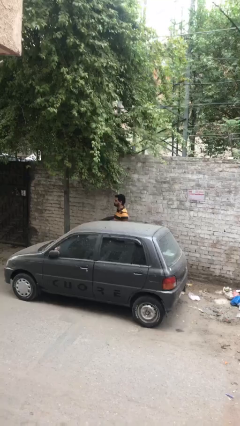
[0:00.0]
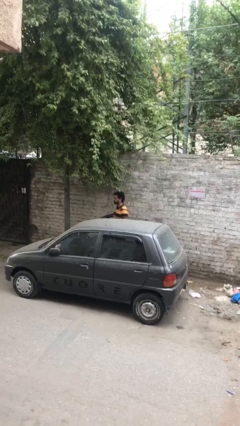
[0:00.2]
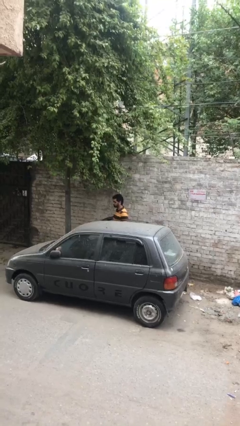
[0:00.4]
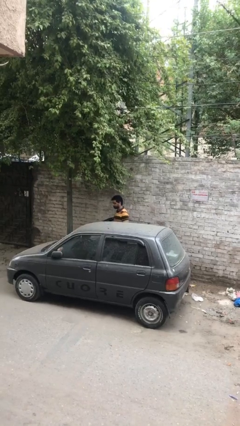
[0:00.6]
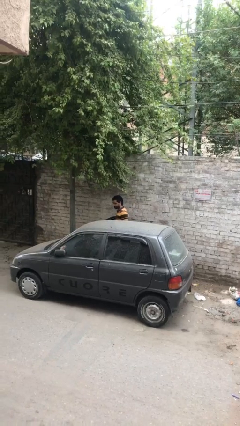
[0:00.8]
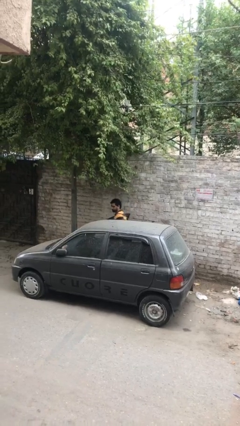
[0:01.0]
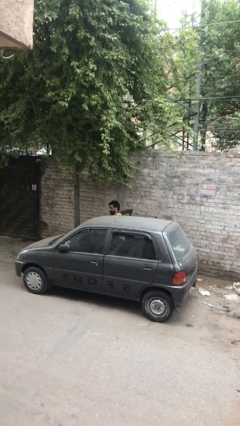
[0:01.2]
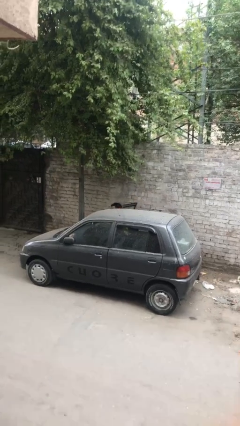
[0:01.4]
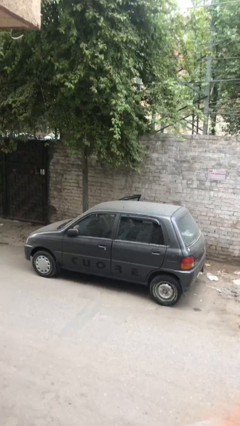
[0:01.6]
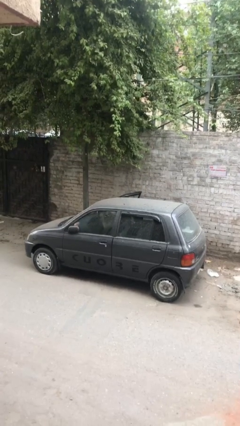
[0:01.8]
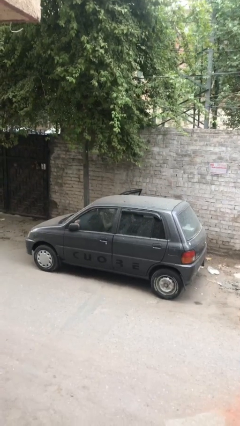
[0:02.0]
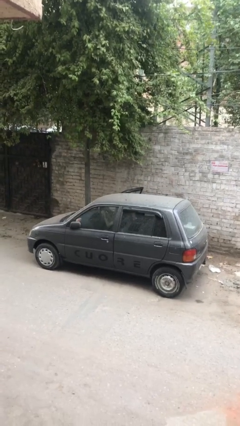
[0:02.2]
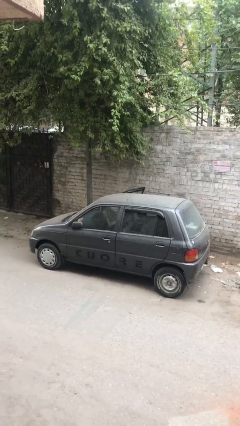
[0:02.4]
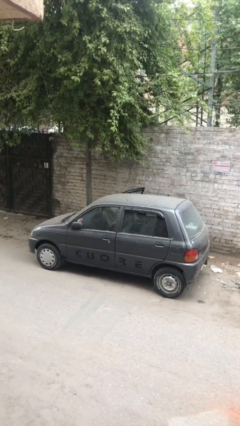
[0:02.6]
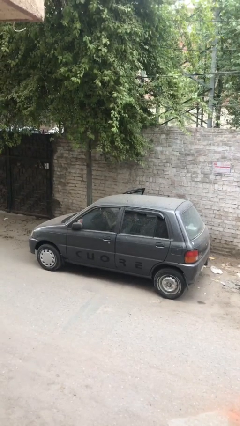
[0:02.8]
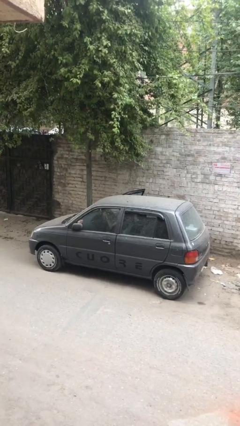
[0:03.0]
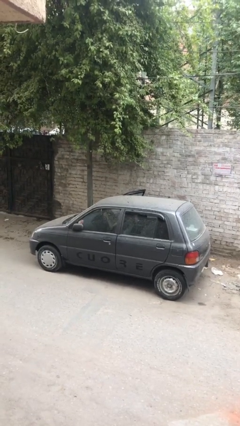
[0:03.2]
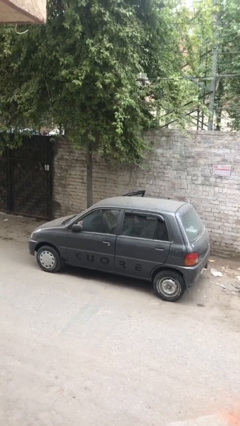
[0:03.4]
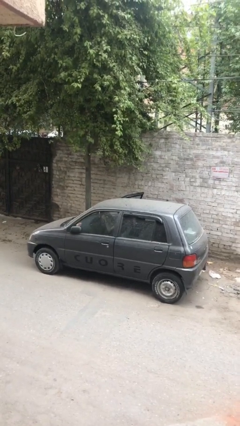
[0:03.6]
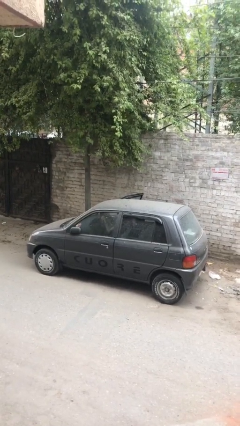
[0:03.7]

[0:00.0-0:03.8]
person enters car

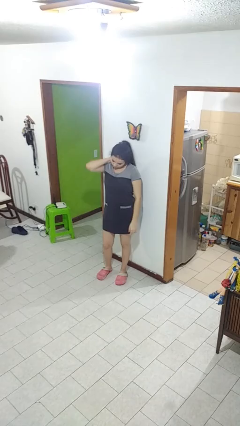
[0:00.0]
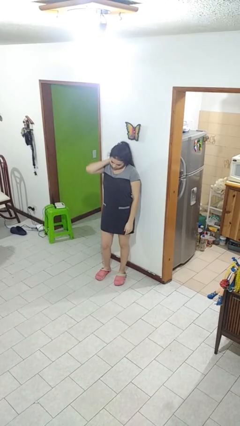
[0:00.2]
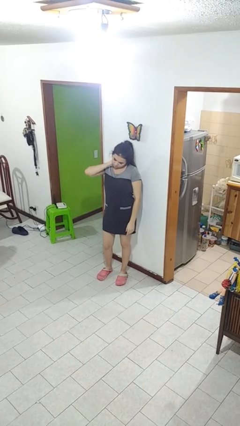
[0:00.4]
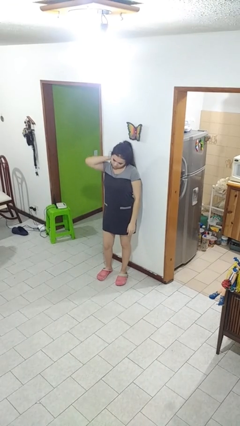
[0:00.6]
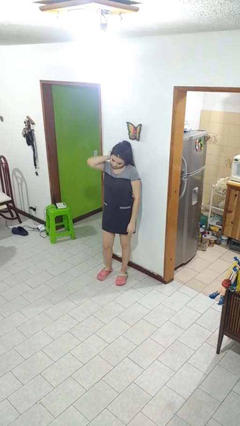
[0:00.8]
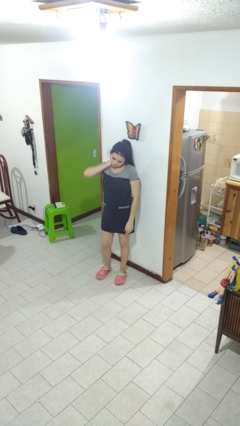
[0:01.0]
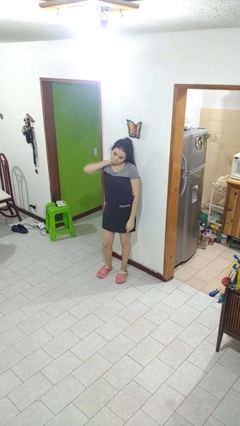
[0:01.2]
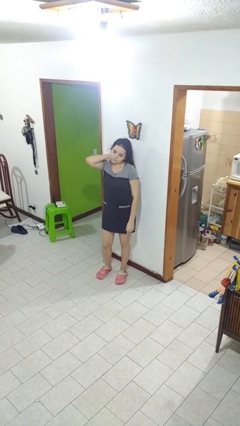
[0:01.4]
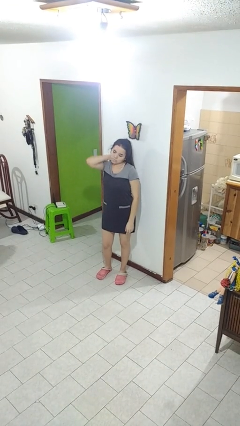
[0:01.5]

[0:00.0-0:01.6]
person rubs neck

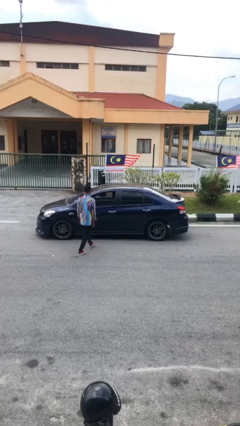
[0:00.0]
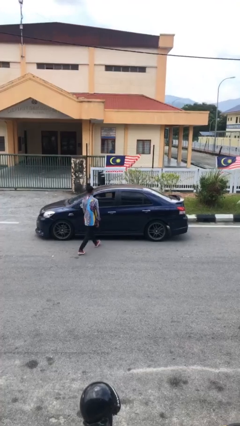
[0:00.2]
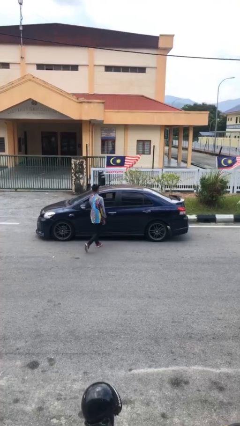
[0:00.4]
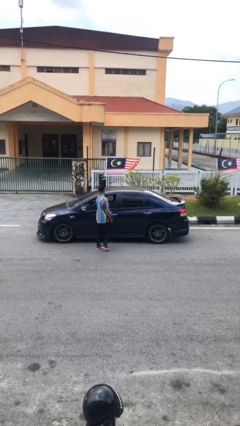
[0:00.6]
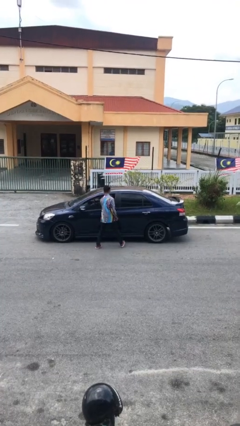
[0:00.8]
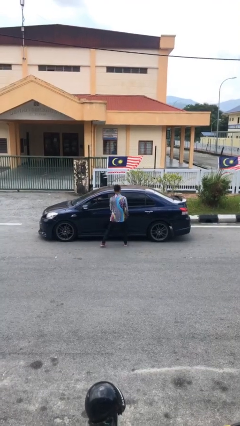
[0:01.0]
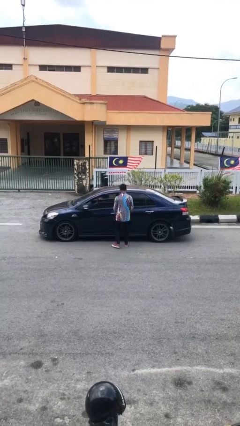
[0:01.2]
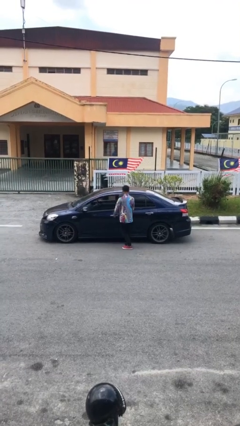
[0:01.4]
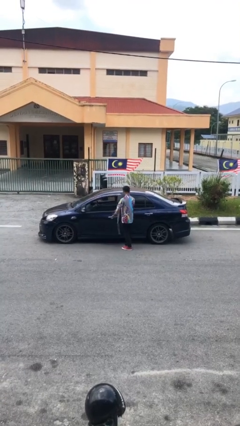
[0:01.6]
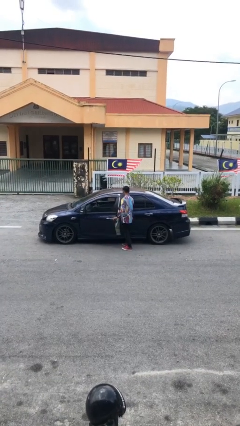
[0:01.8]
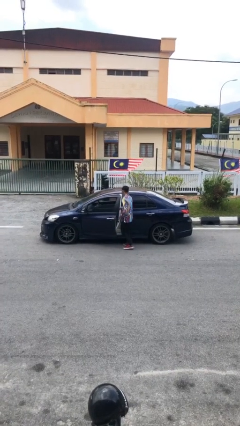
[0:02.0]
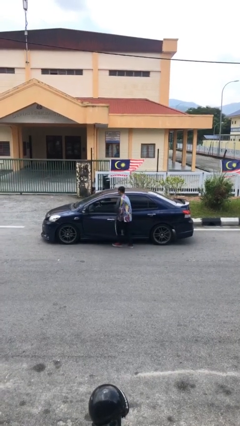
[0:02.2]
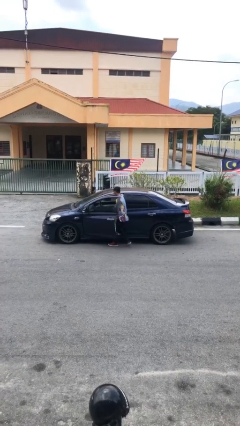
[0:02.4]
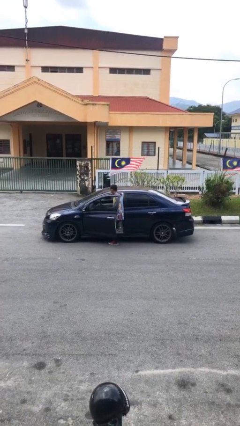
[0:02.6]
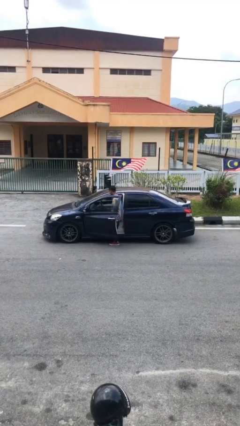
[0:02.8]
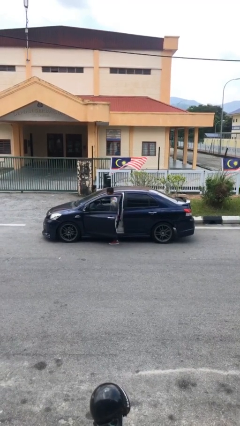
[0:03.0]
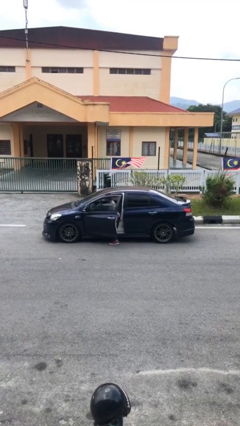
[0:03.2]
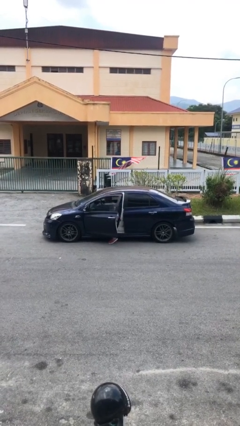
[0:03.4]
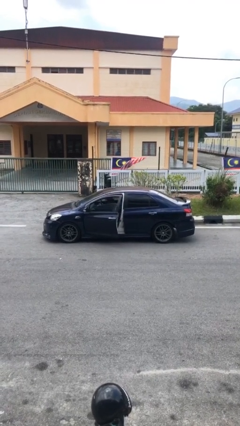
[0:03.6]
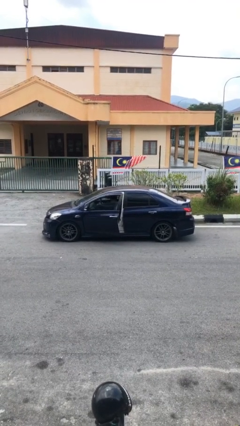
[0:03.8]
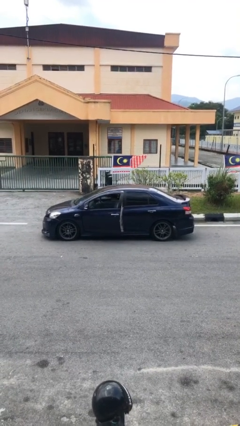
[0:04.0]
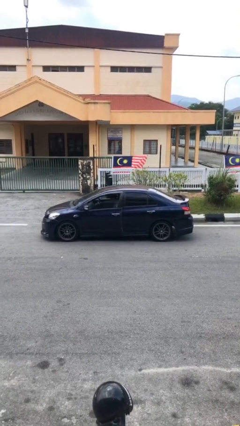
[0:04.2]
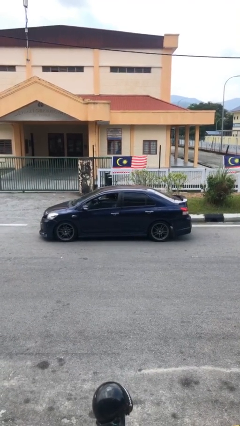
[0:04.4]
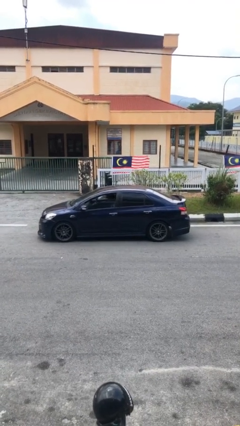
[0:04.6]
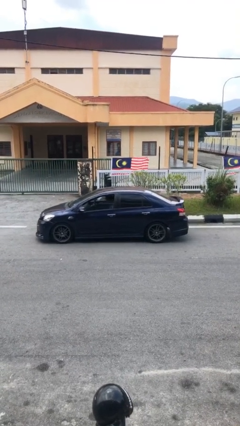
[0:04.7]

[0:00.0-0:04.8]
car picks up person

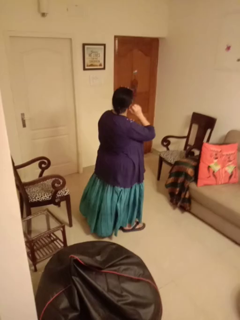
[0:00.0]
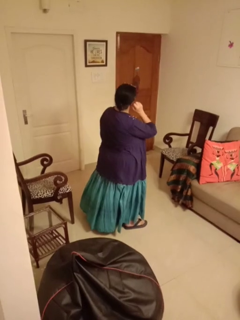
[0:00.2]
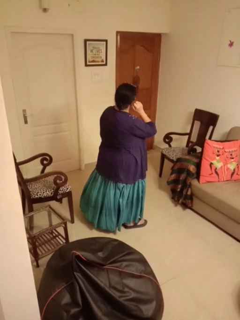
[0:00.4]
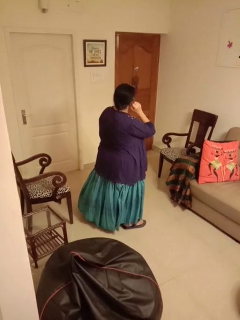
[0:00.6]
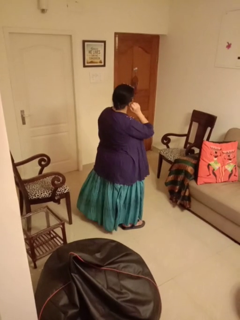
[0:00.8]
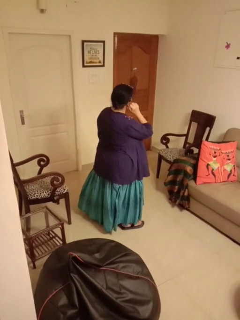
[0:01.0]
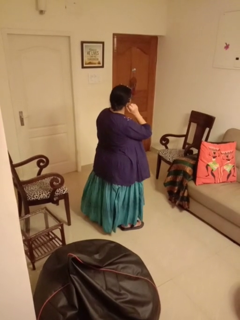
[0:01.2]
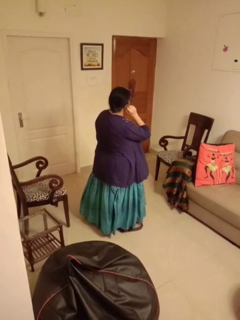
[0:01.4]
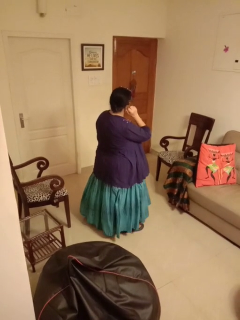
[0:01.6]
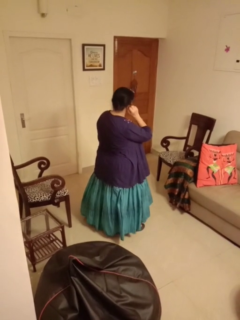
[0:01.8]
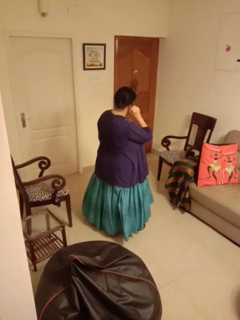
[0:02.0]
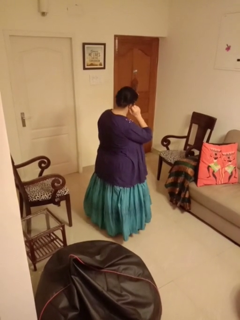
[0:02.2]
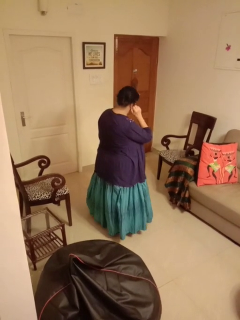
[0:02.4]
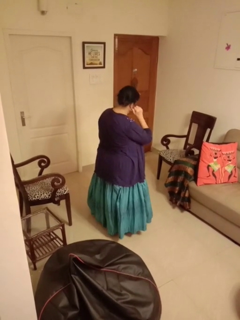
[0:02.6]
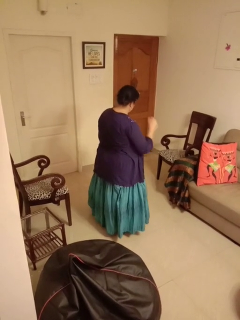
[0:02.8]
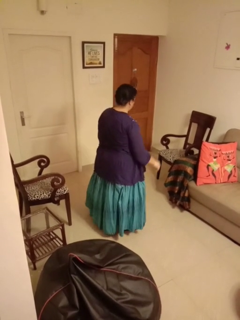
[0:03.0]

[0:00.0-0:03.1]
person touches earlobe

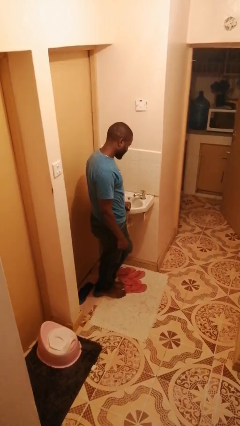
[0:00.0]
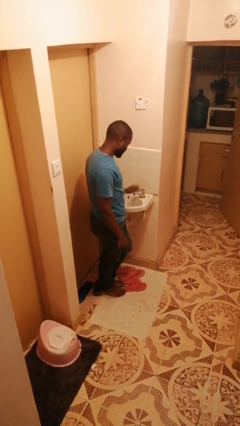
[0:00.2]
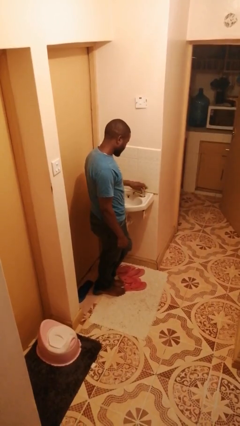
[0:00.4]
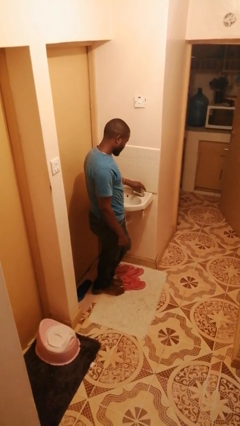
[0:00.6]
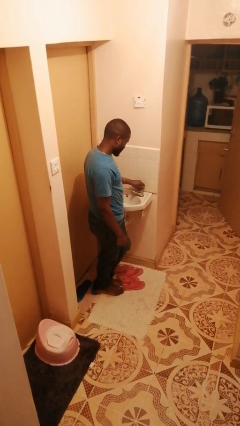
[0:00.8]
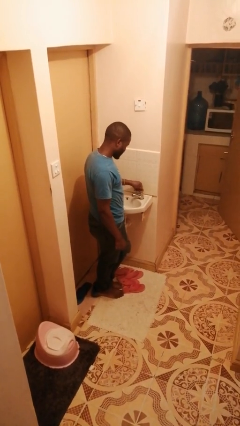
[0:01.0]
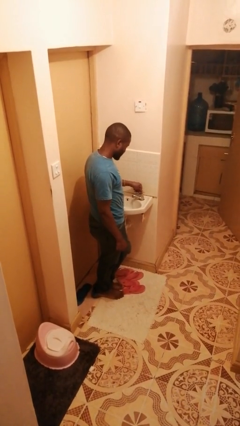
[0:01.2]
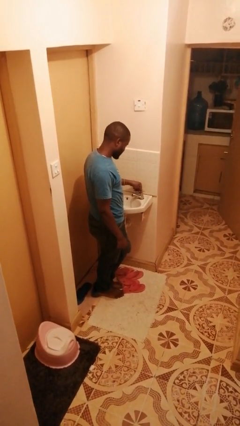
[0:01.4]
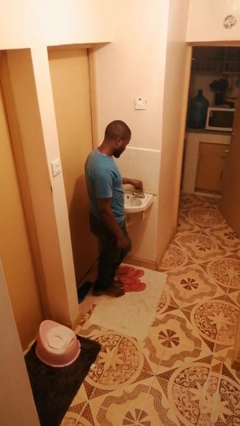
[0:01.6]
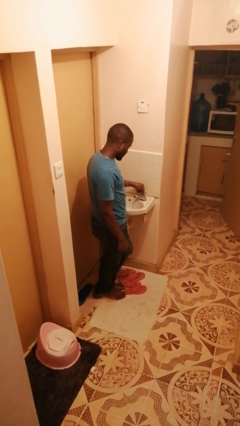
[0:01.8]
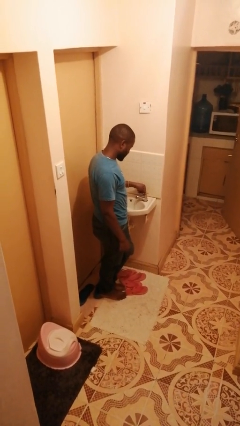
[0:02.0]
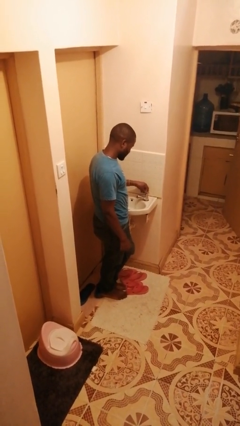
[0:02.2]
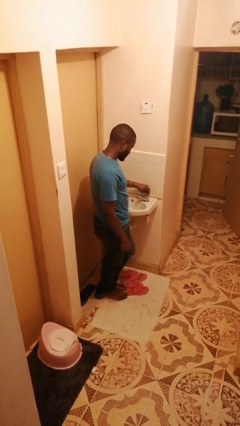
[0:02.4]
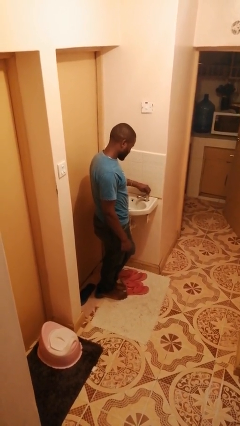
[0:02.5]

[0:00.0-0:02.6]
person turns on faucet

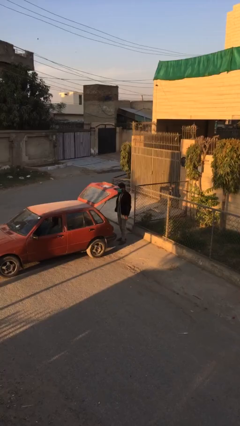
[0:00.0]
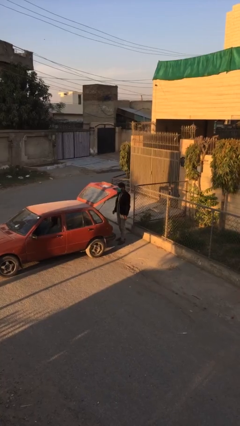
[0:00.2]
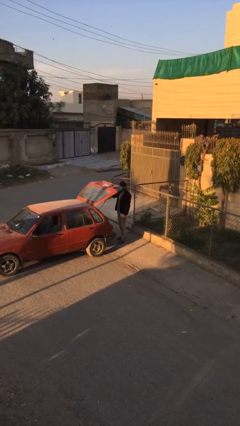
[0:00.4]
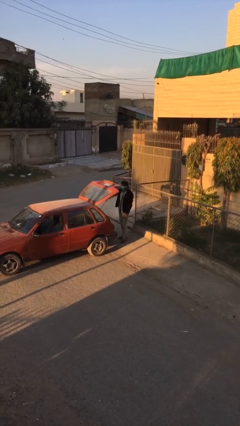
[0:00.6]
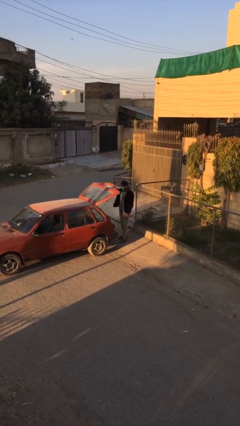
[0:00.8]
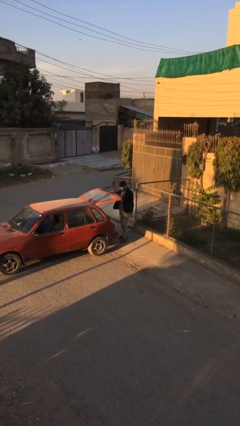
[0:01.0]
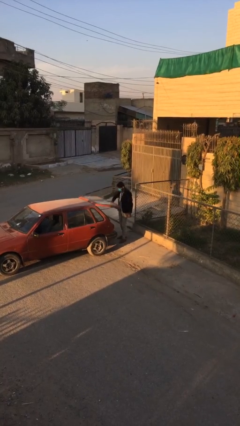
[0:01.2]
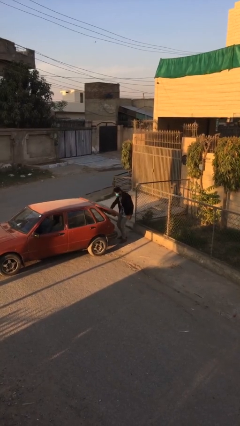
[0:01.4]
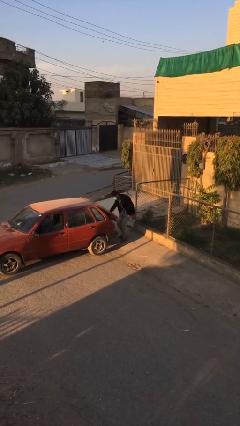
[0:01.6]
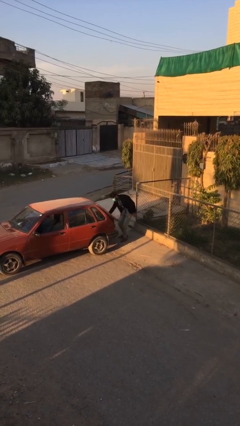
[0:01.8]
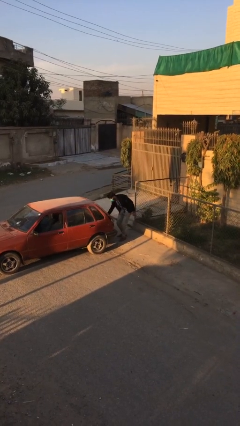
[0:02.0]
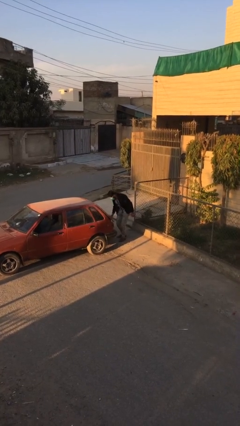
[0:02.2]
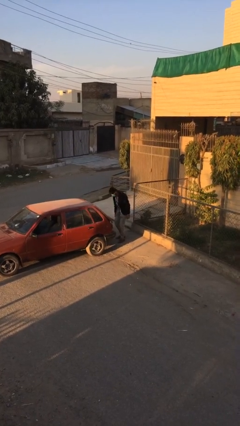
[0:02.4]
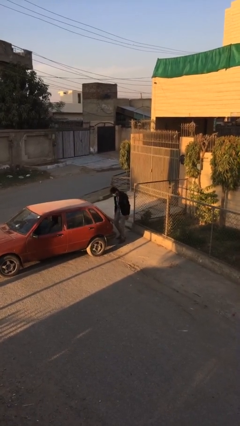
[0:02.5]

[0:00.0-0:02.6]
person closes car trunk
